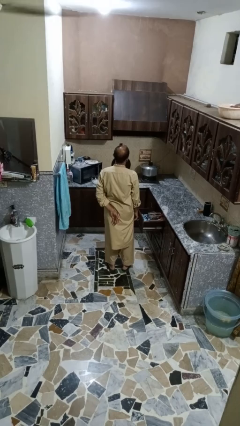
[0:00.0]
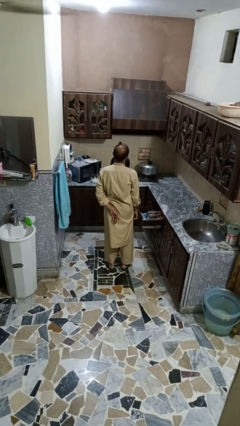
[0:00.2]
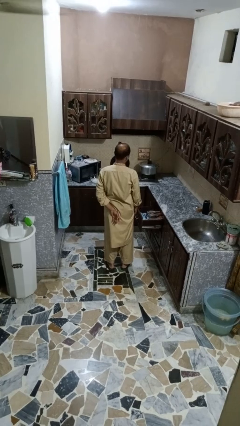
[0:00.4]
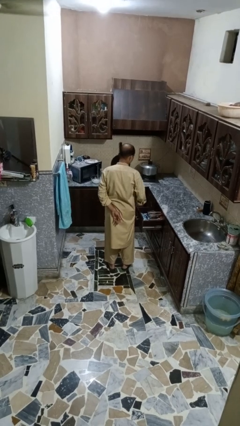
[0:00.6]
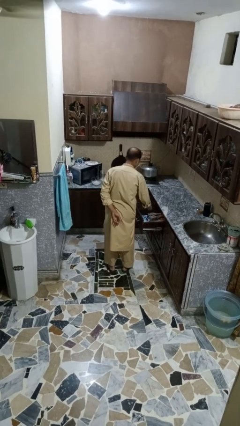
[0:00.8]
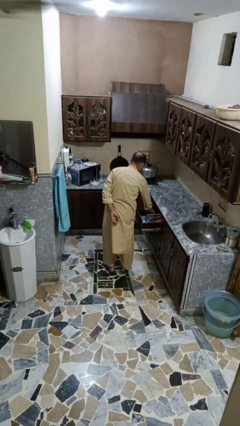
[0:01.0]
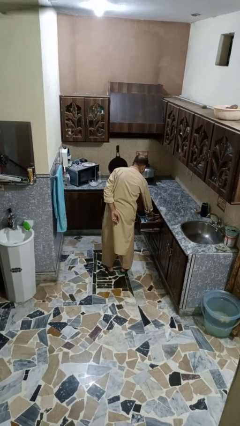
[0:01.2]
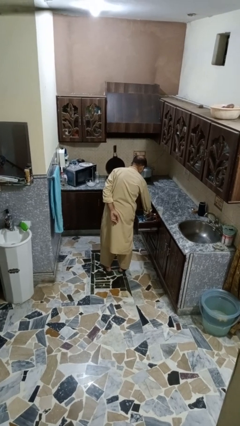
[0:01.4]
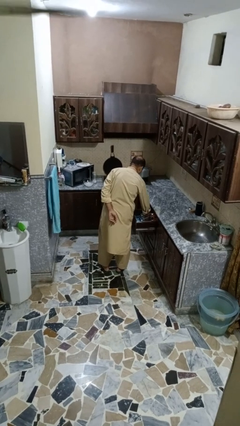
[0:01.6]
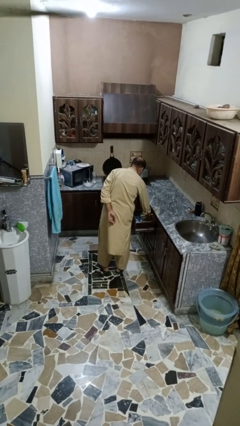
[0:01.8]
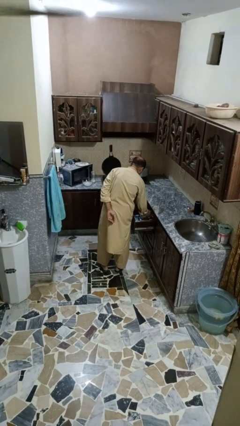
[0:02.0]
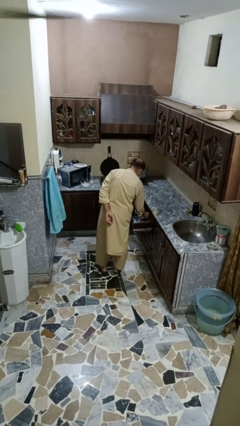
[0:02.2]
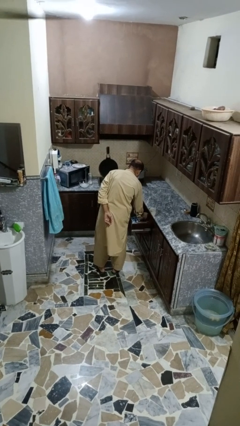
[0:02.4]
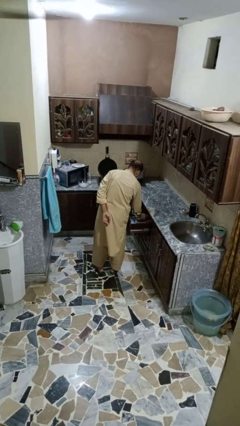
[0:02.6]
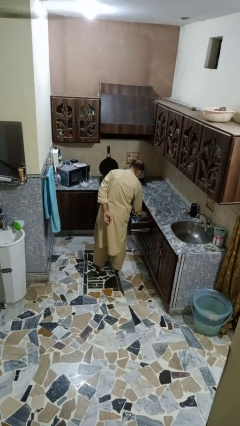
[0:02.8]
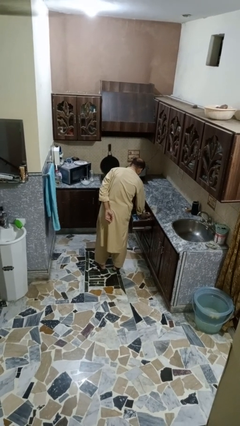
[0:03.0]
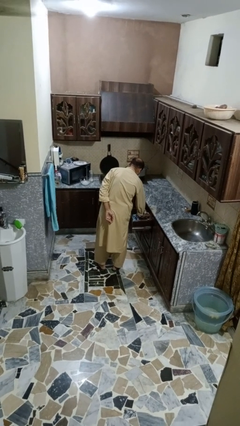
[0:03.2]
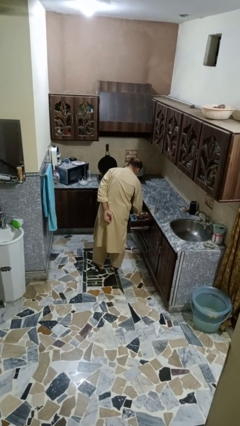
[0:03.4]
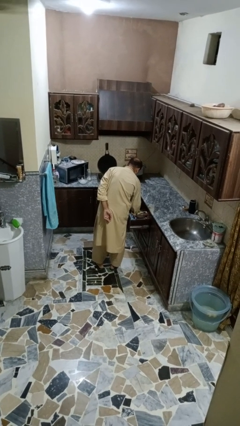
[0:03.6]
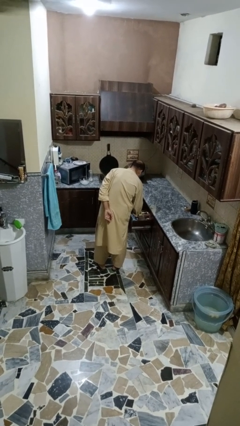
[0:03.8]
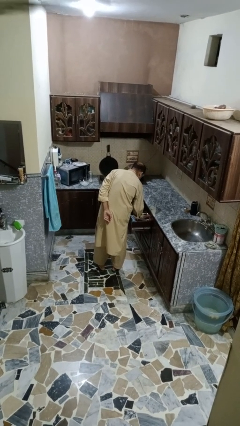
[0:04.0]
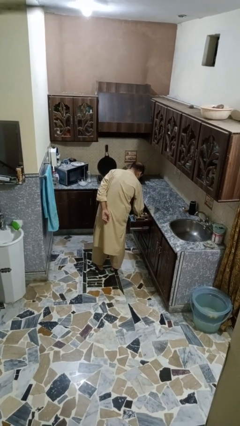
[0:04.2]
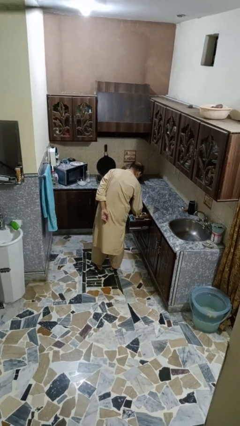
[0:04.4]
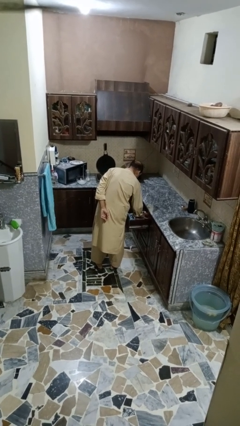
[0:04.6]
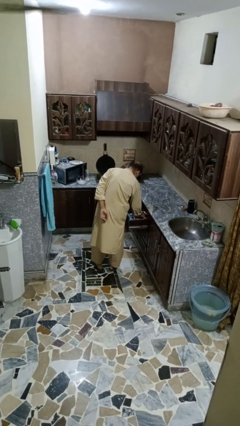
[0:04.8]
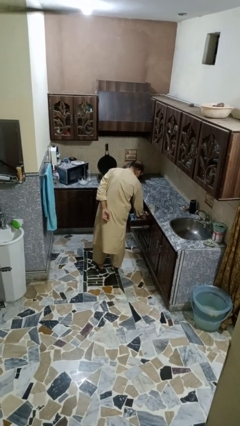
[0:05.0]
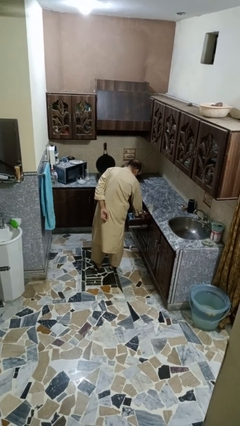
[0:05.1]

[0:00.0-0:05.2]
person searches in kitchen drawer

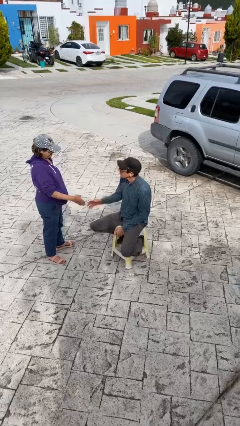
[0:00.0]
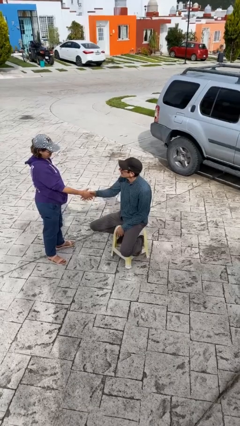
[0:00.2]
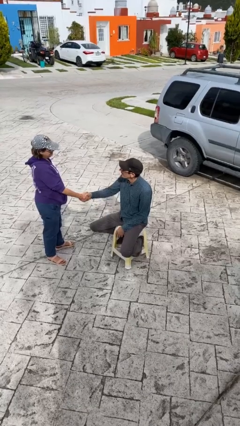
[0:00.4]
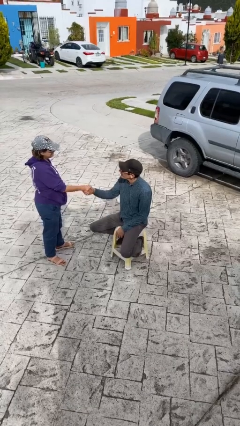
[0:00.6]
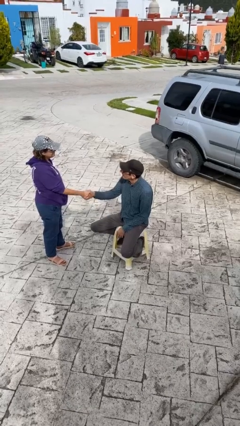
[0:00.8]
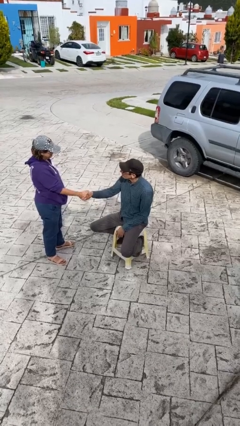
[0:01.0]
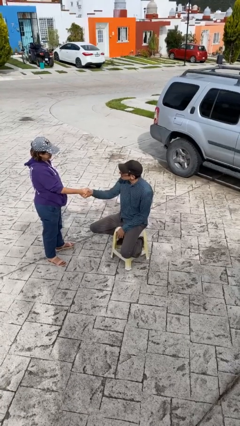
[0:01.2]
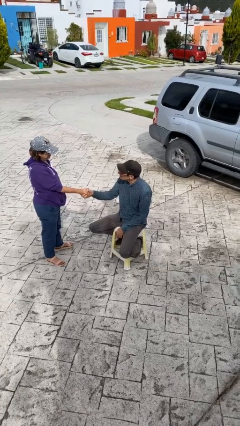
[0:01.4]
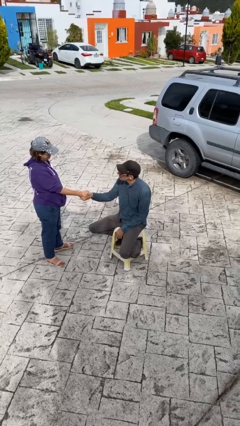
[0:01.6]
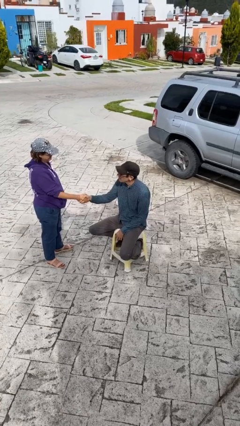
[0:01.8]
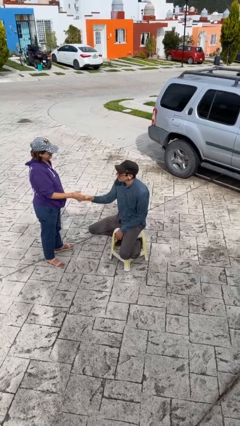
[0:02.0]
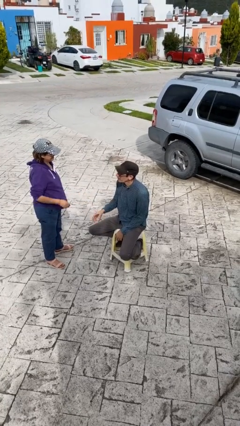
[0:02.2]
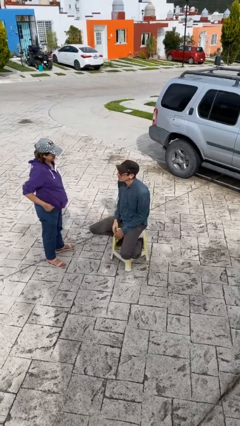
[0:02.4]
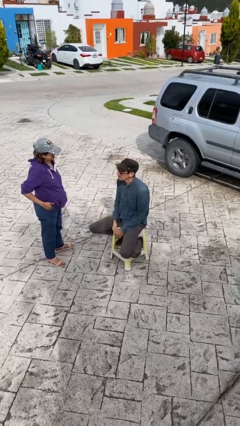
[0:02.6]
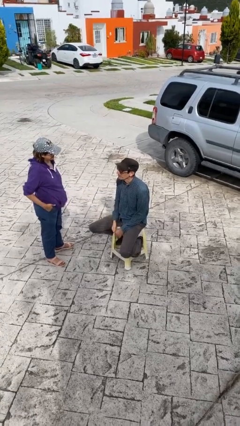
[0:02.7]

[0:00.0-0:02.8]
person shakes hand

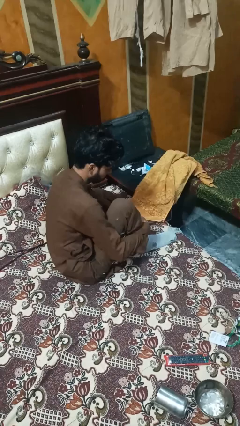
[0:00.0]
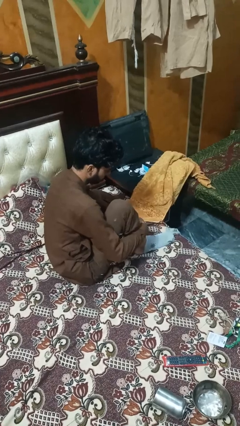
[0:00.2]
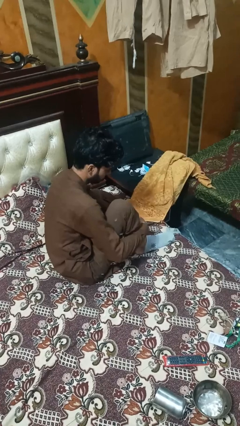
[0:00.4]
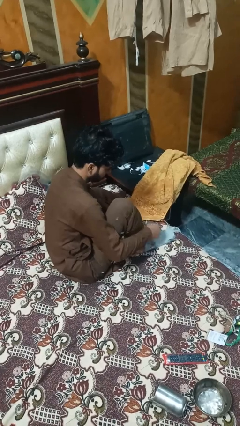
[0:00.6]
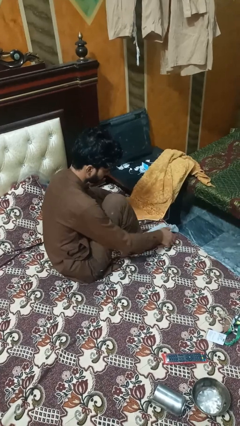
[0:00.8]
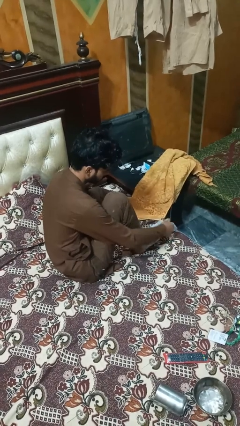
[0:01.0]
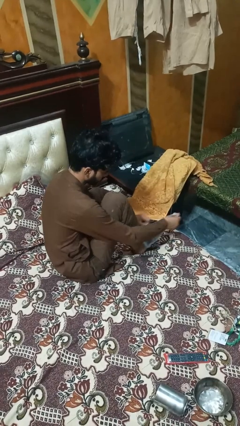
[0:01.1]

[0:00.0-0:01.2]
person takes off socks

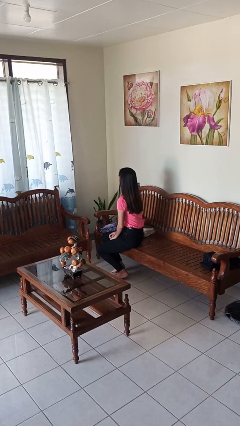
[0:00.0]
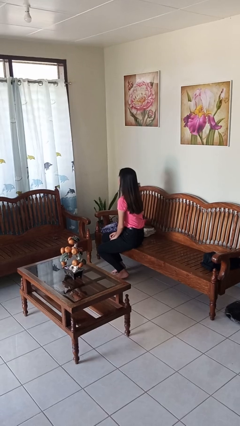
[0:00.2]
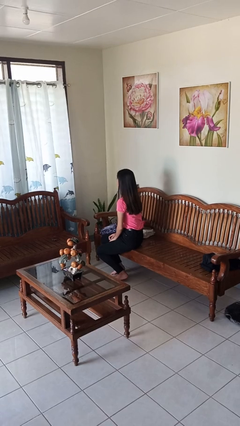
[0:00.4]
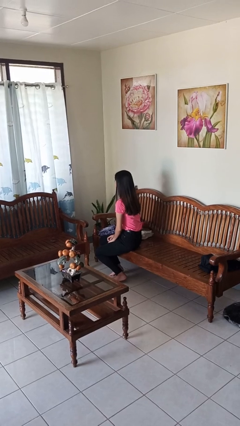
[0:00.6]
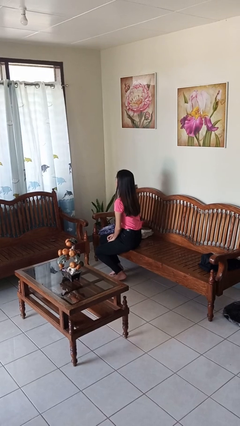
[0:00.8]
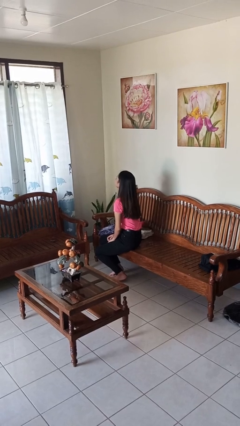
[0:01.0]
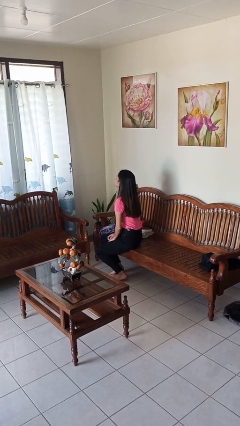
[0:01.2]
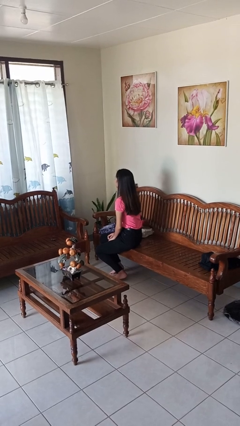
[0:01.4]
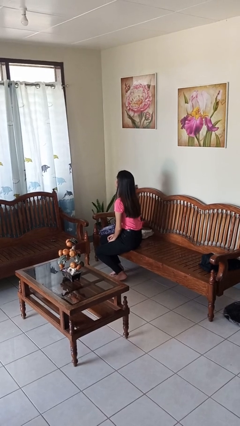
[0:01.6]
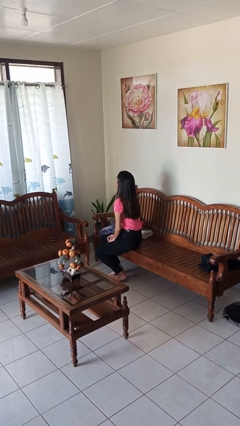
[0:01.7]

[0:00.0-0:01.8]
person nods head

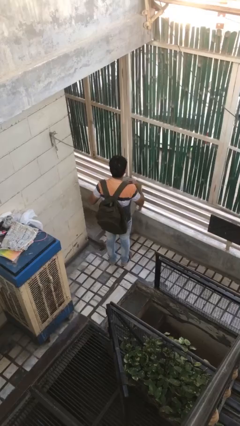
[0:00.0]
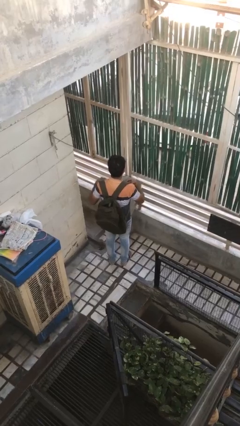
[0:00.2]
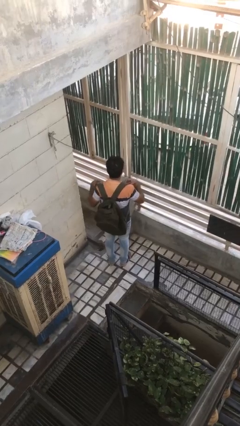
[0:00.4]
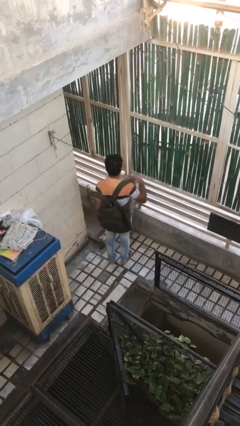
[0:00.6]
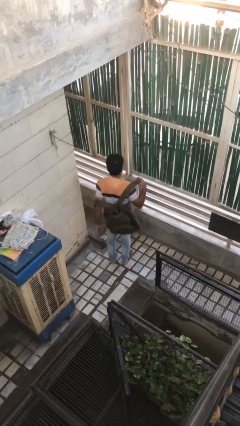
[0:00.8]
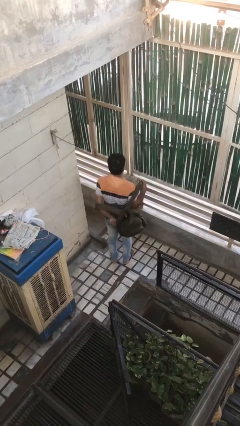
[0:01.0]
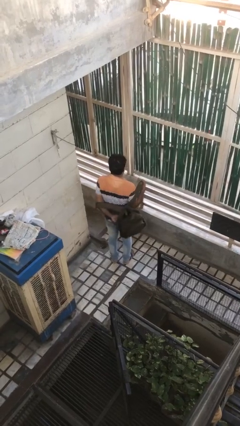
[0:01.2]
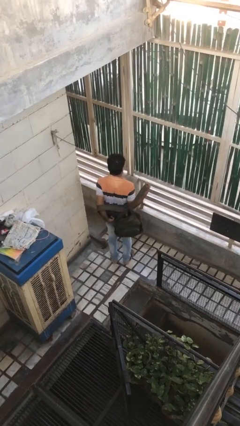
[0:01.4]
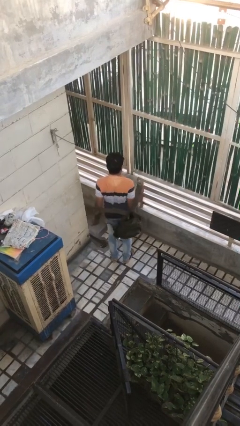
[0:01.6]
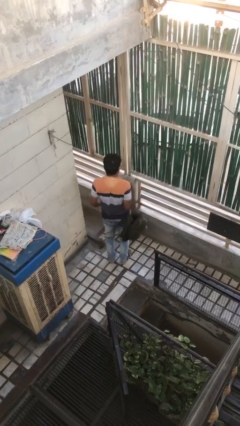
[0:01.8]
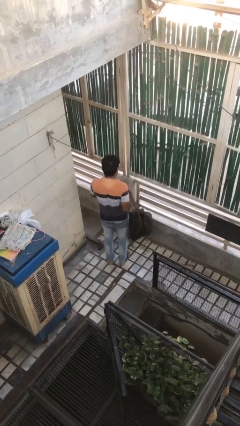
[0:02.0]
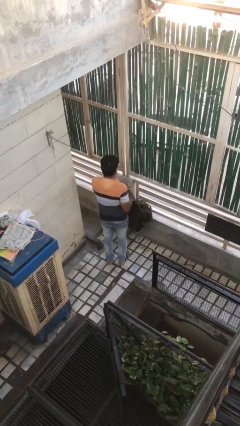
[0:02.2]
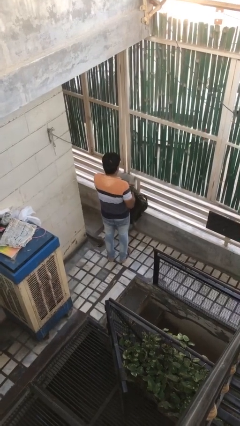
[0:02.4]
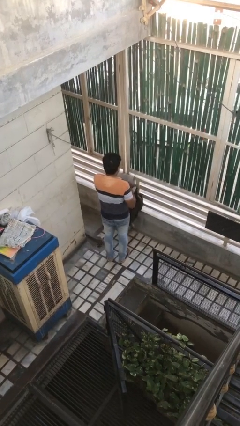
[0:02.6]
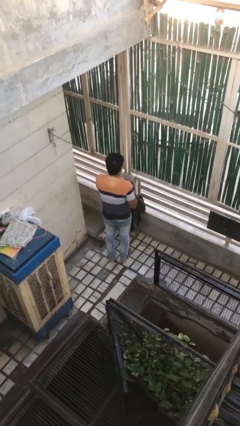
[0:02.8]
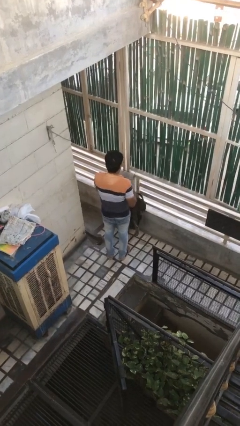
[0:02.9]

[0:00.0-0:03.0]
person takes off backpack

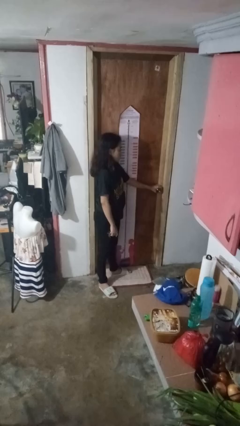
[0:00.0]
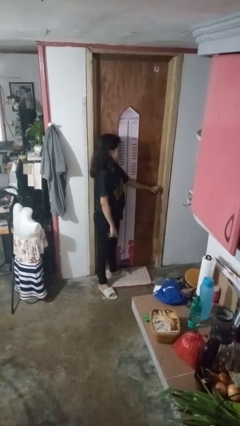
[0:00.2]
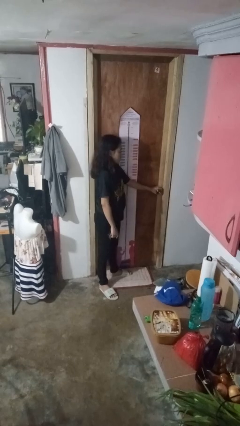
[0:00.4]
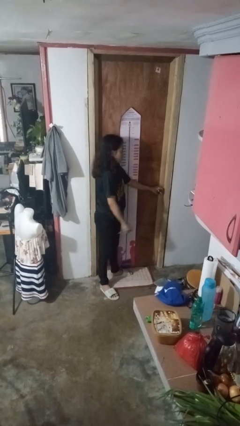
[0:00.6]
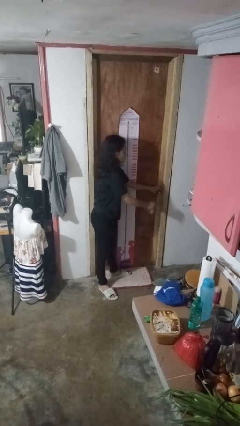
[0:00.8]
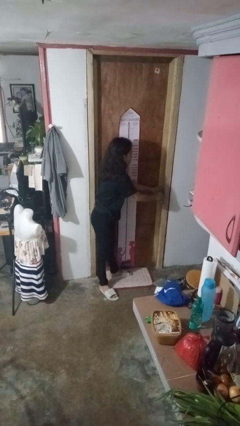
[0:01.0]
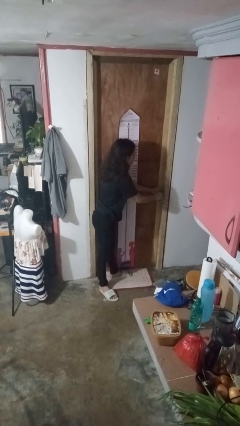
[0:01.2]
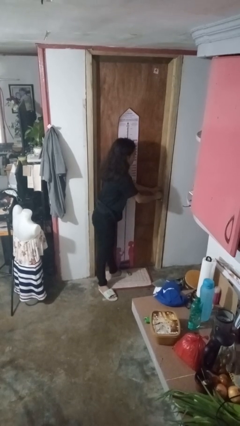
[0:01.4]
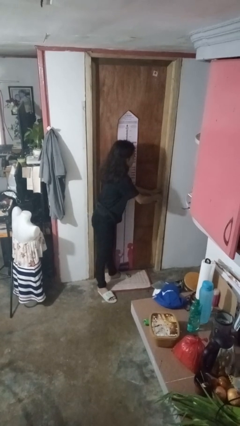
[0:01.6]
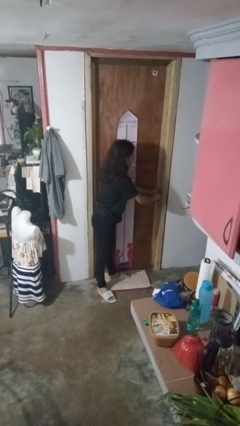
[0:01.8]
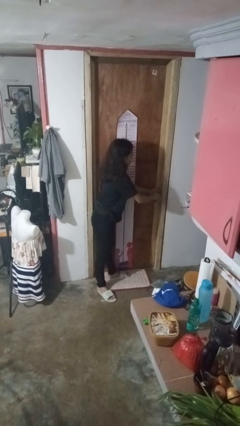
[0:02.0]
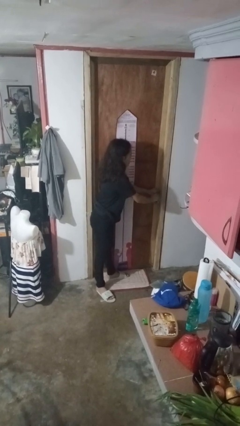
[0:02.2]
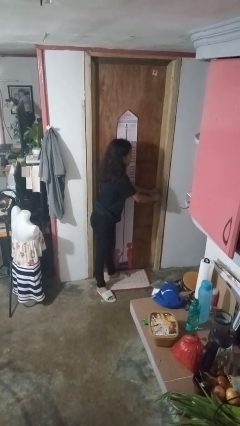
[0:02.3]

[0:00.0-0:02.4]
person unlocks door with keys

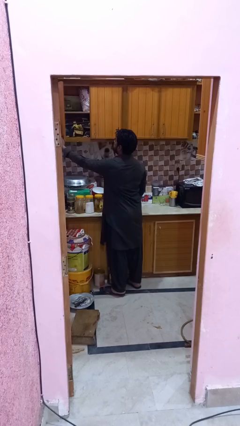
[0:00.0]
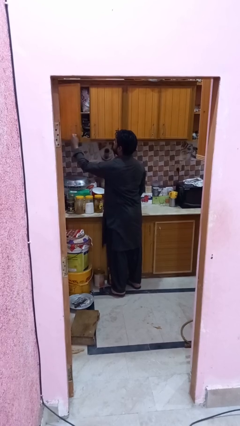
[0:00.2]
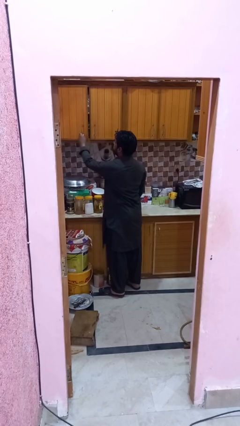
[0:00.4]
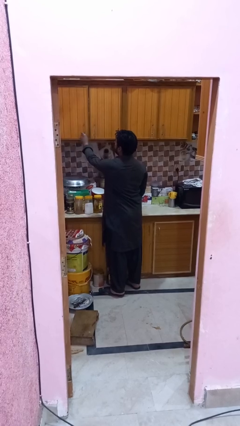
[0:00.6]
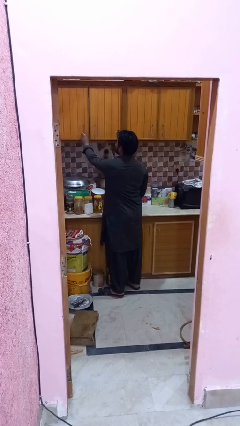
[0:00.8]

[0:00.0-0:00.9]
person closes cabinet
